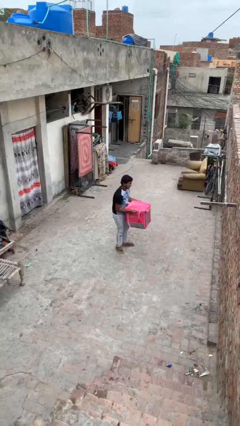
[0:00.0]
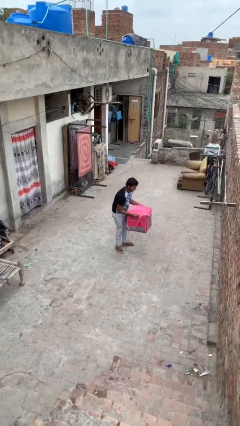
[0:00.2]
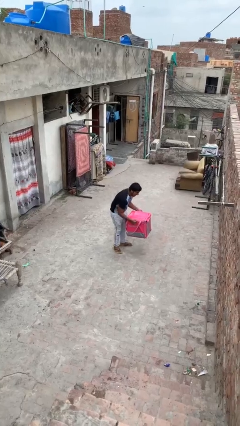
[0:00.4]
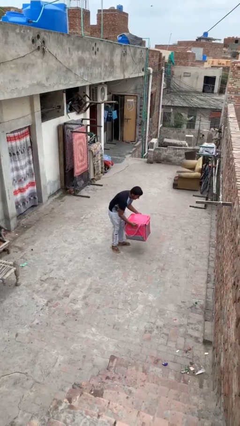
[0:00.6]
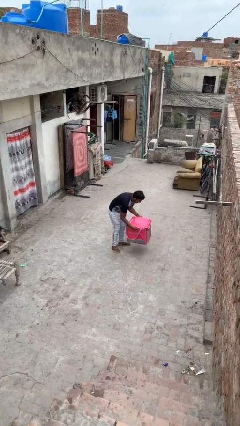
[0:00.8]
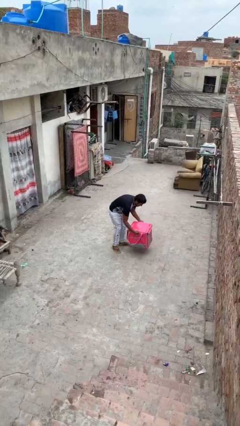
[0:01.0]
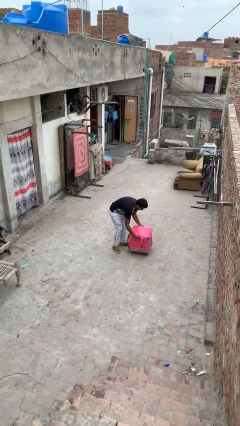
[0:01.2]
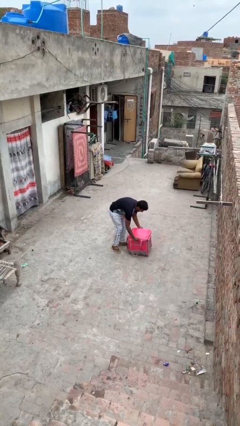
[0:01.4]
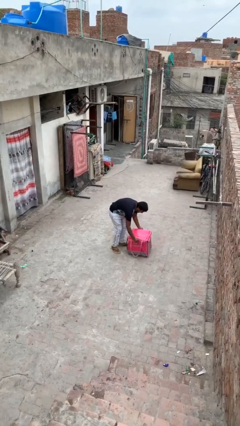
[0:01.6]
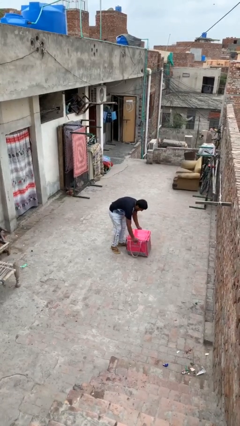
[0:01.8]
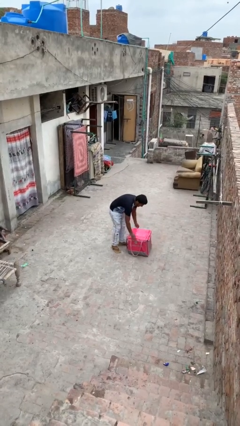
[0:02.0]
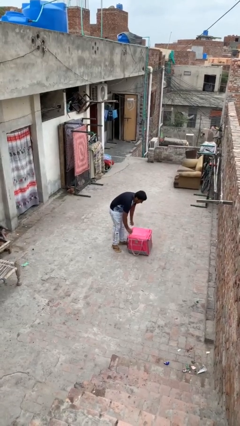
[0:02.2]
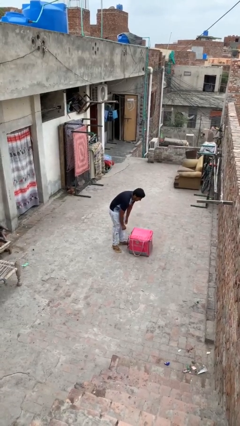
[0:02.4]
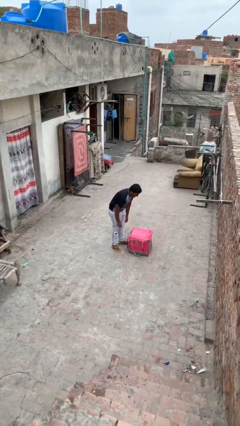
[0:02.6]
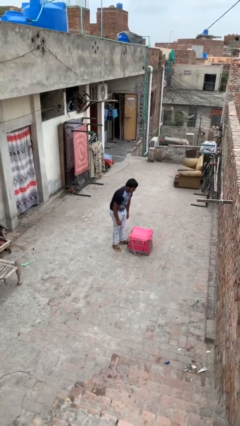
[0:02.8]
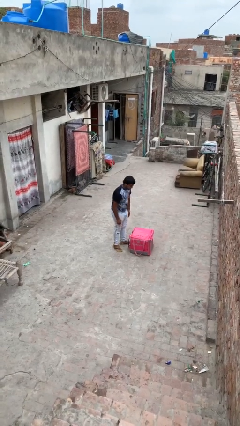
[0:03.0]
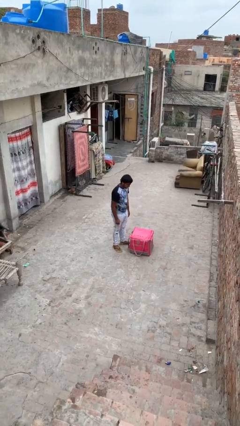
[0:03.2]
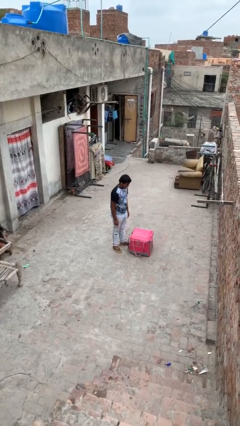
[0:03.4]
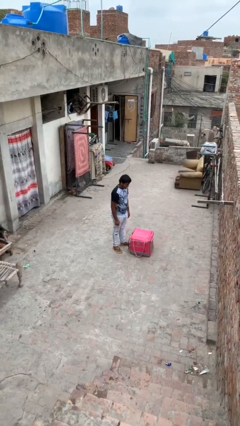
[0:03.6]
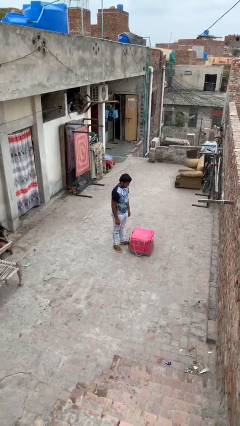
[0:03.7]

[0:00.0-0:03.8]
person puts down object on floor

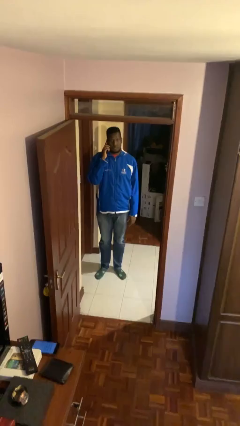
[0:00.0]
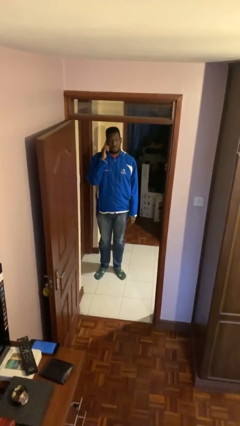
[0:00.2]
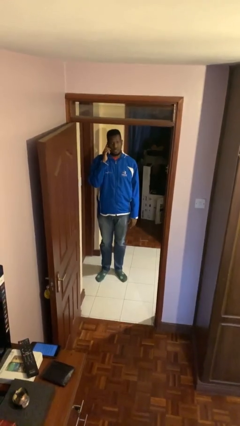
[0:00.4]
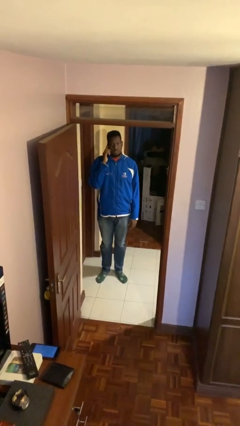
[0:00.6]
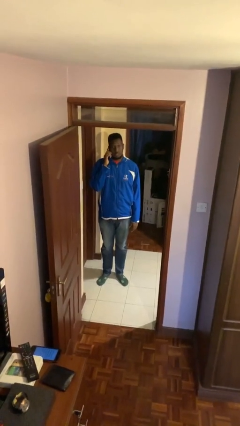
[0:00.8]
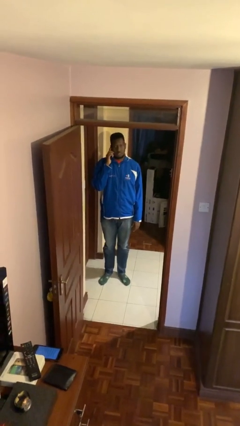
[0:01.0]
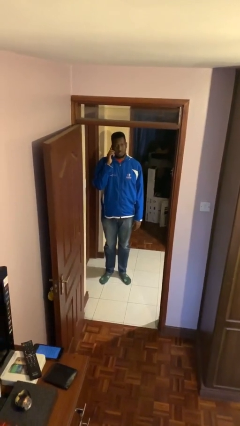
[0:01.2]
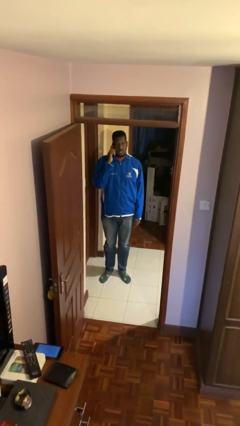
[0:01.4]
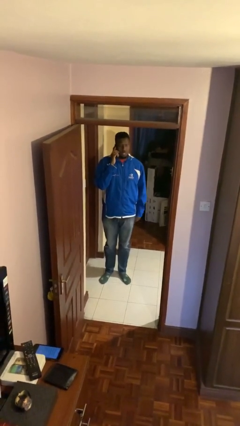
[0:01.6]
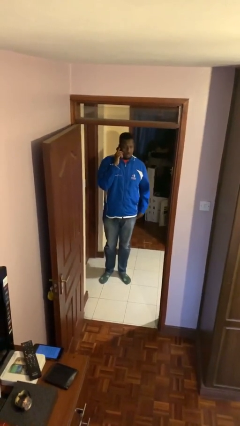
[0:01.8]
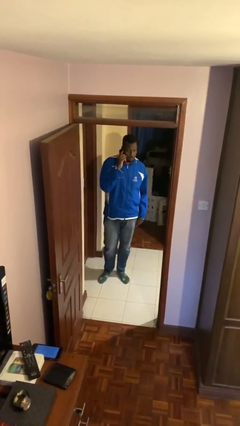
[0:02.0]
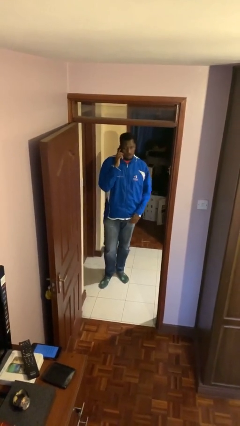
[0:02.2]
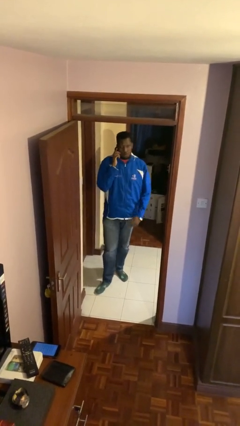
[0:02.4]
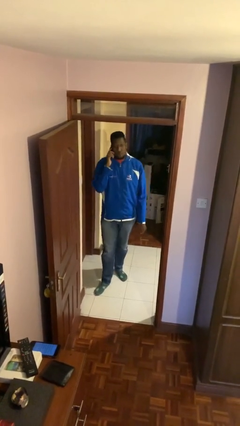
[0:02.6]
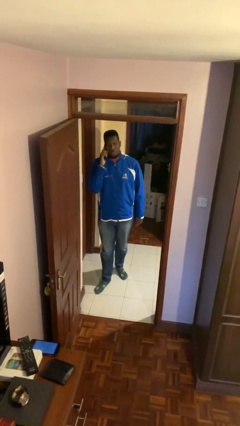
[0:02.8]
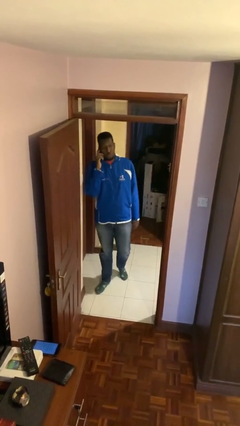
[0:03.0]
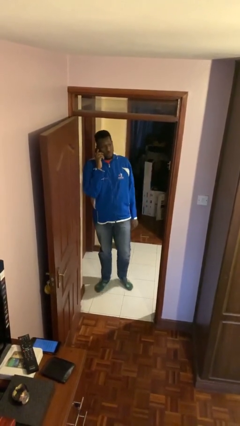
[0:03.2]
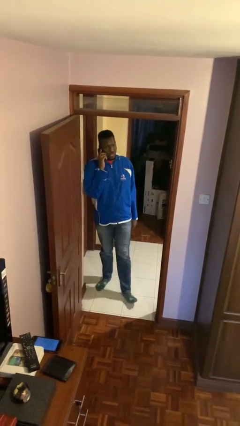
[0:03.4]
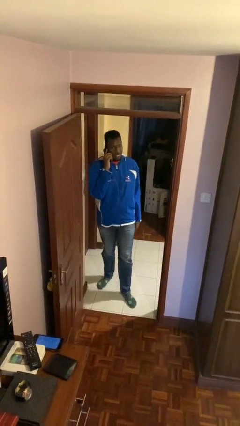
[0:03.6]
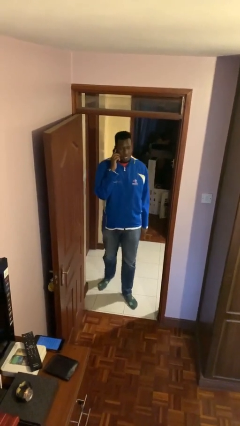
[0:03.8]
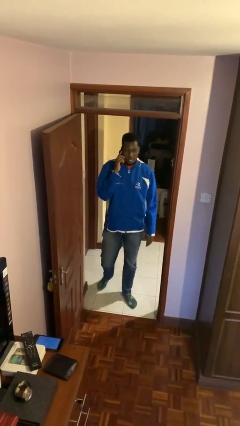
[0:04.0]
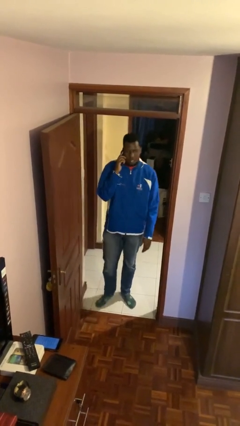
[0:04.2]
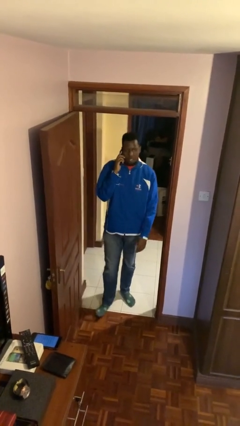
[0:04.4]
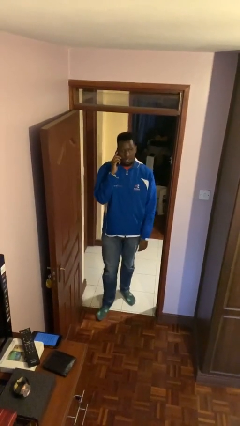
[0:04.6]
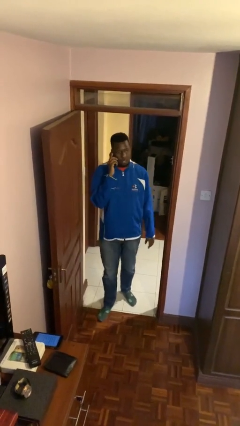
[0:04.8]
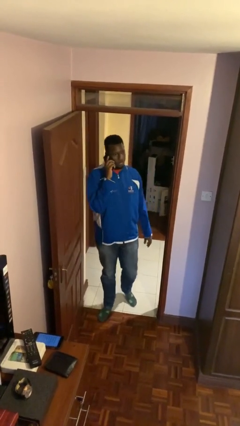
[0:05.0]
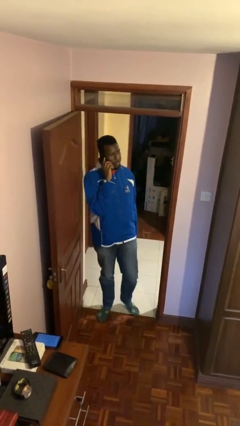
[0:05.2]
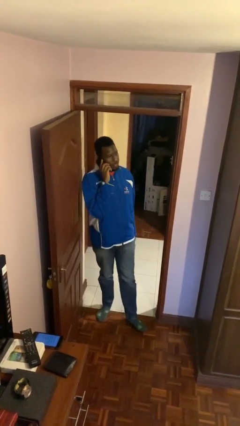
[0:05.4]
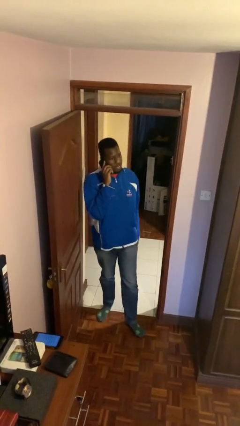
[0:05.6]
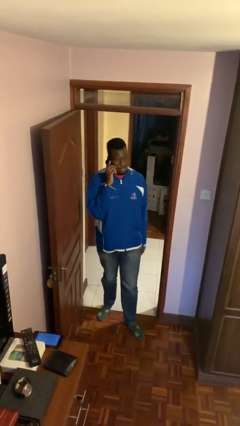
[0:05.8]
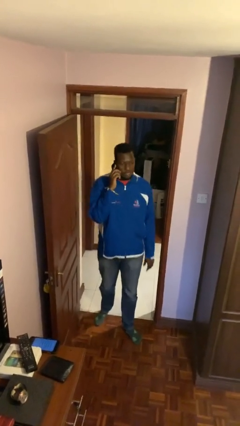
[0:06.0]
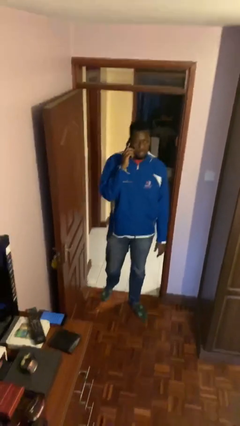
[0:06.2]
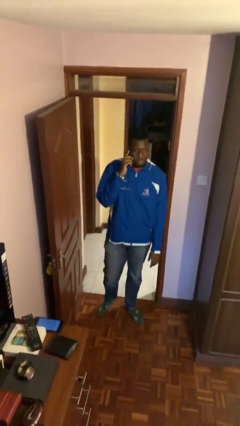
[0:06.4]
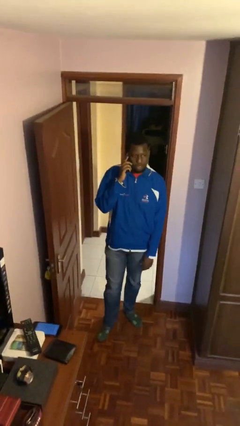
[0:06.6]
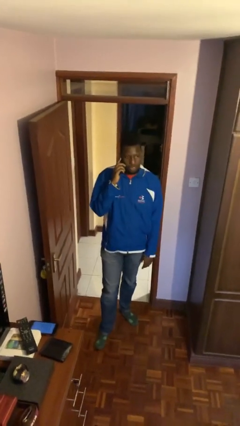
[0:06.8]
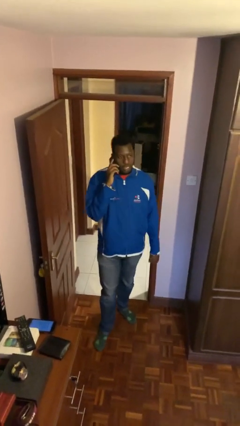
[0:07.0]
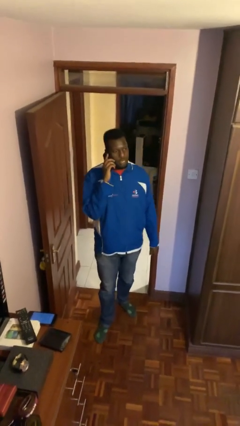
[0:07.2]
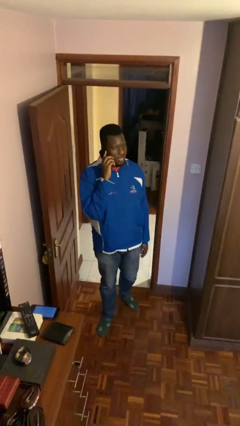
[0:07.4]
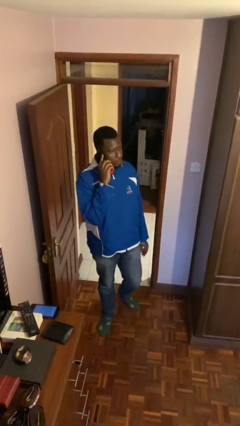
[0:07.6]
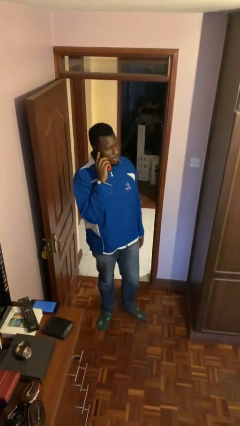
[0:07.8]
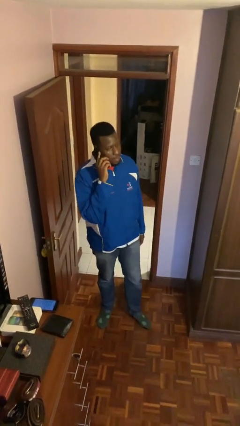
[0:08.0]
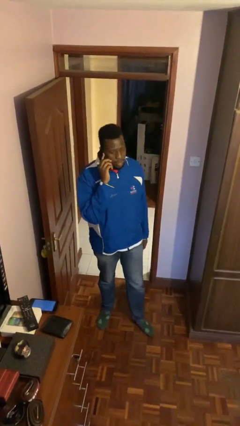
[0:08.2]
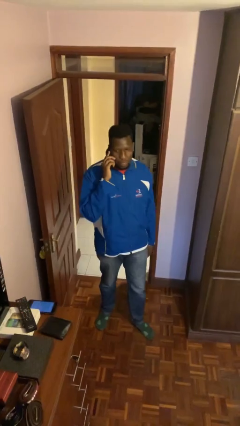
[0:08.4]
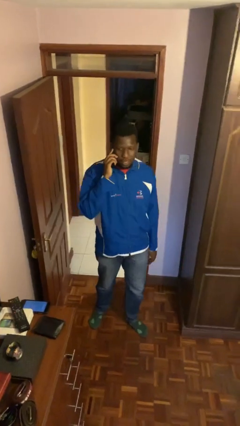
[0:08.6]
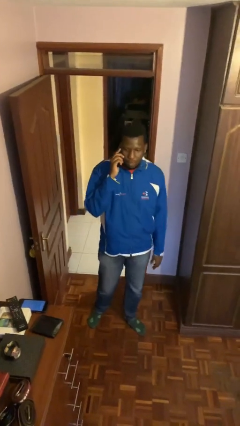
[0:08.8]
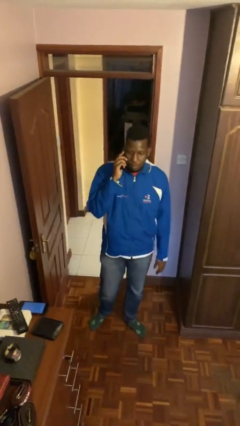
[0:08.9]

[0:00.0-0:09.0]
person enters scene through structure

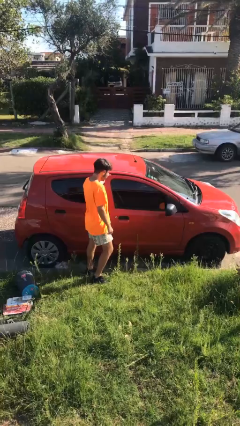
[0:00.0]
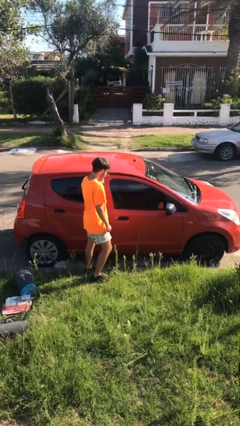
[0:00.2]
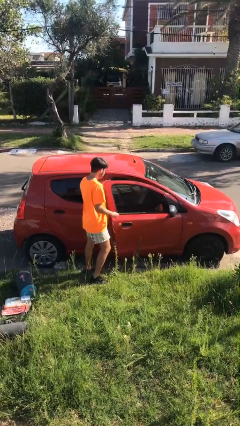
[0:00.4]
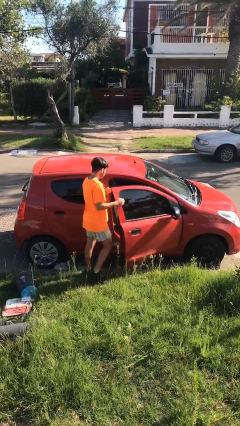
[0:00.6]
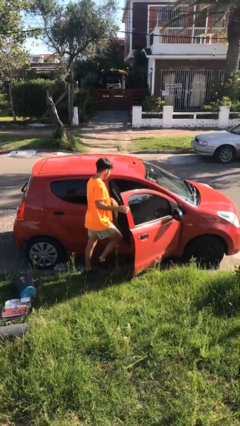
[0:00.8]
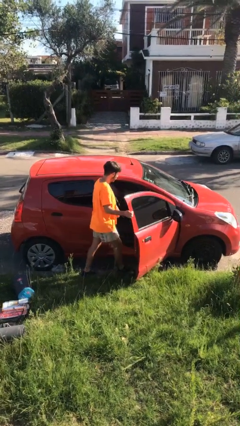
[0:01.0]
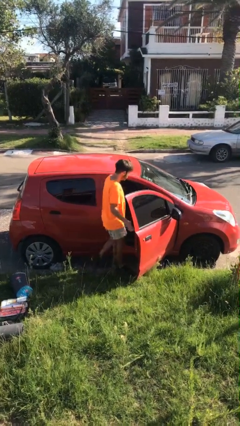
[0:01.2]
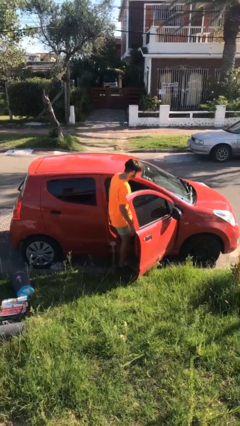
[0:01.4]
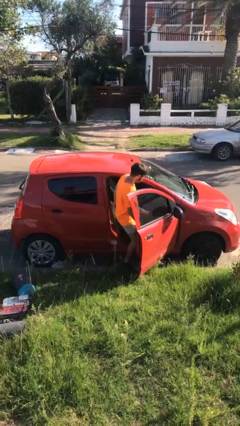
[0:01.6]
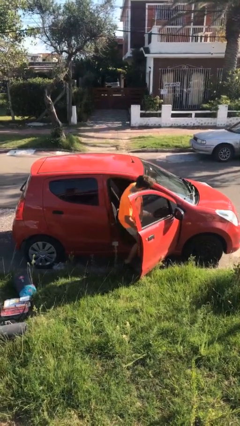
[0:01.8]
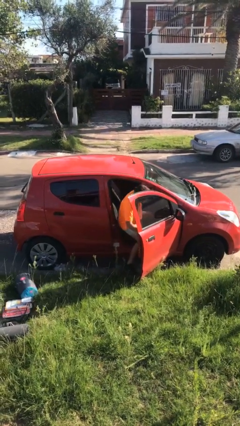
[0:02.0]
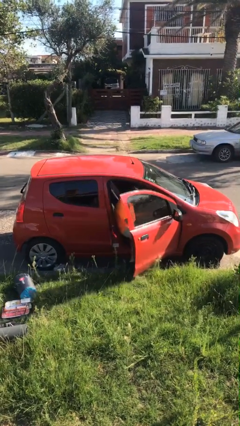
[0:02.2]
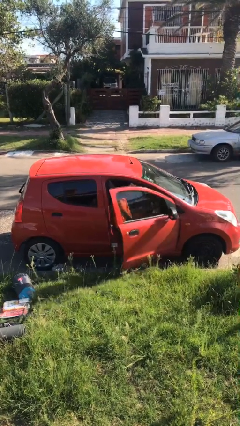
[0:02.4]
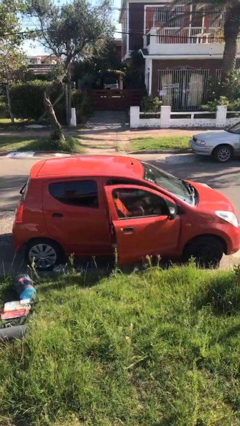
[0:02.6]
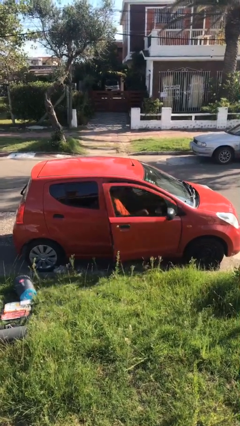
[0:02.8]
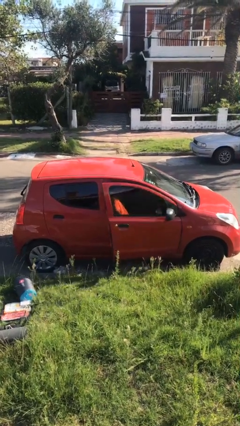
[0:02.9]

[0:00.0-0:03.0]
car picks up person

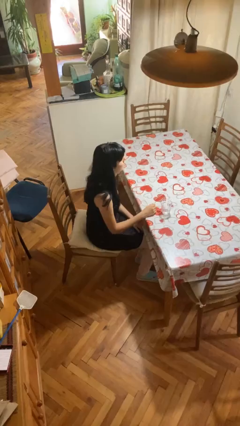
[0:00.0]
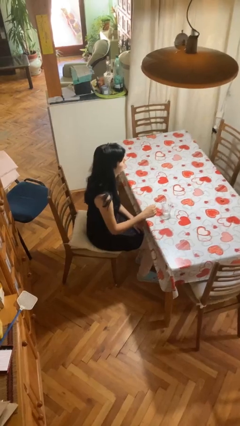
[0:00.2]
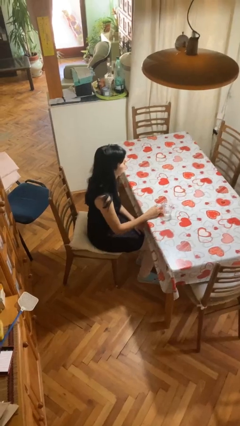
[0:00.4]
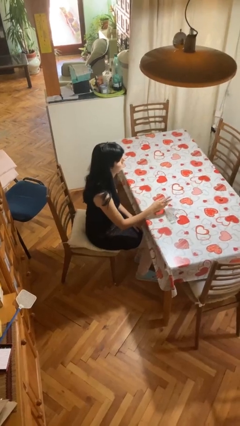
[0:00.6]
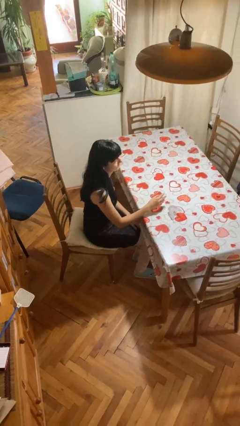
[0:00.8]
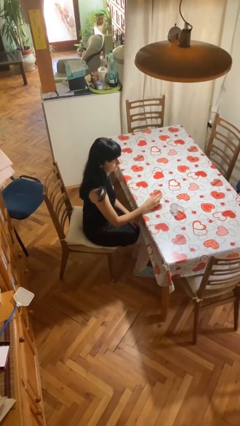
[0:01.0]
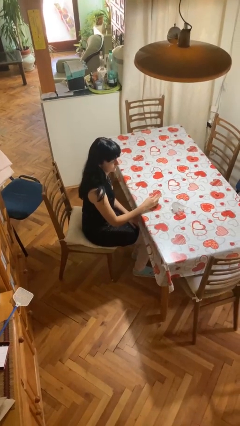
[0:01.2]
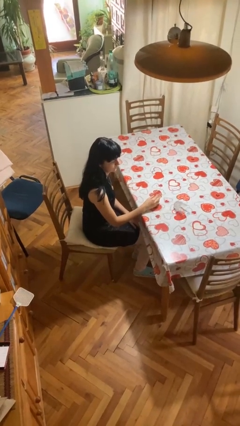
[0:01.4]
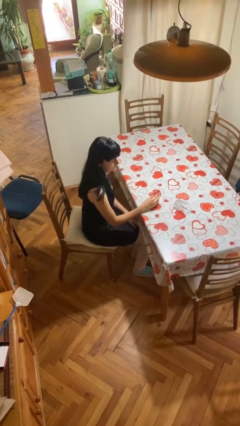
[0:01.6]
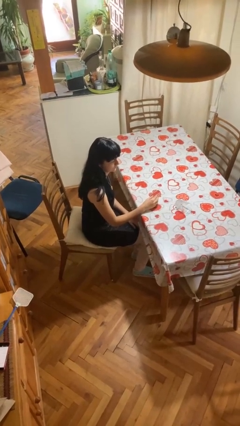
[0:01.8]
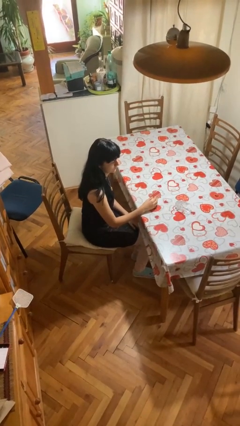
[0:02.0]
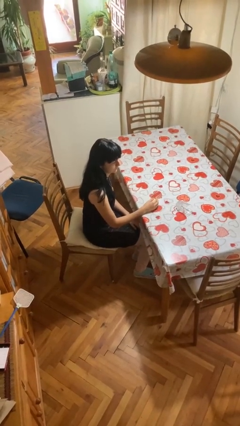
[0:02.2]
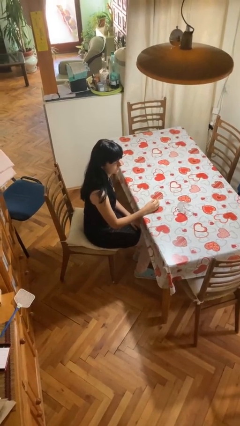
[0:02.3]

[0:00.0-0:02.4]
person knocks over glass
